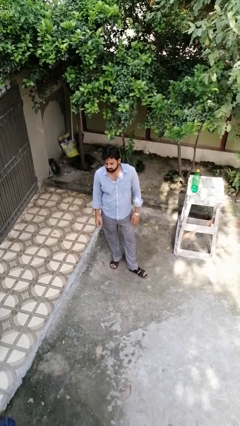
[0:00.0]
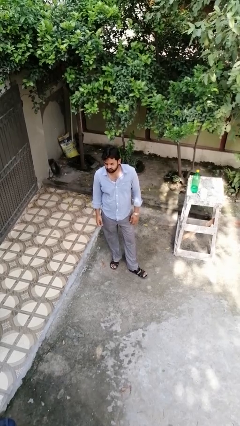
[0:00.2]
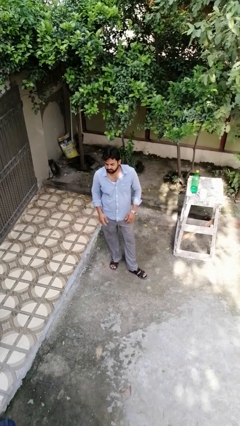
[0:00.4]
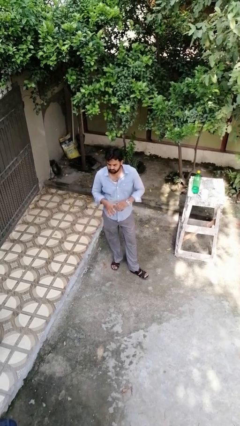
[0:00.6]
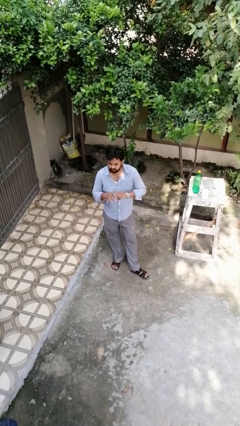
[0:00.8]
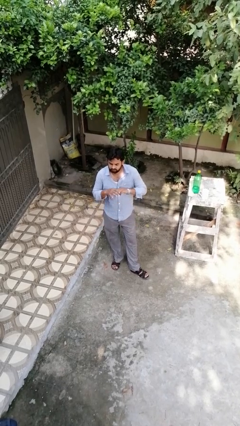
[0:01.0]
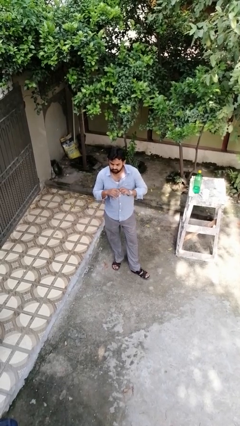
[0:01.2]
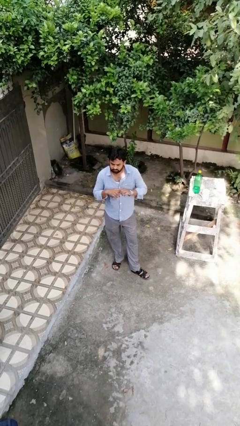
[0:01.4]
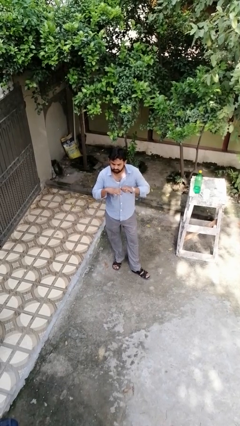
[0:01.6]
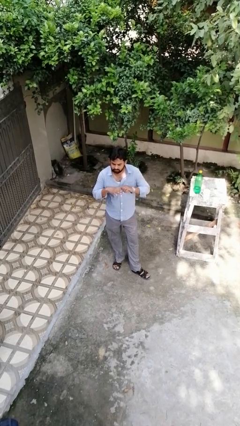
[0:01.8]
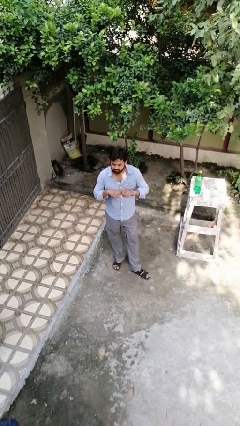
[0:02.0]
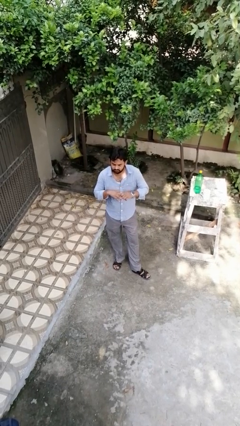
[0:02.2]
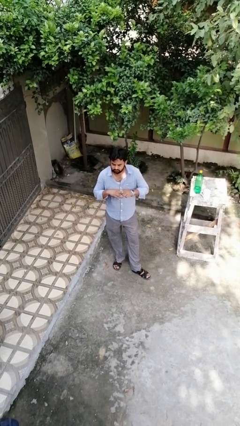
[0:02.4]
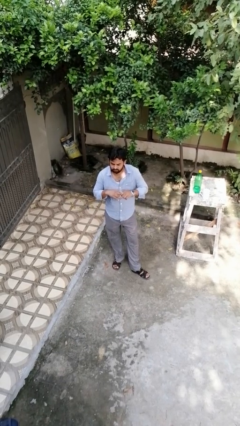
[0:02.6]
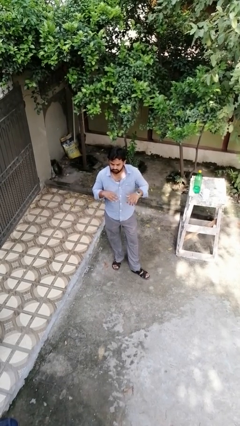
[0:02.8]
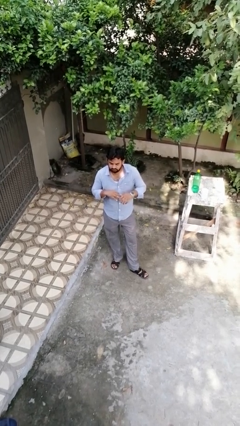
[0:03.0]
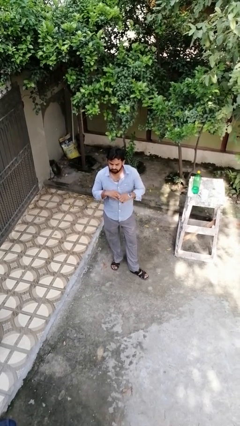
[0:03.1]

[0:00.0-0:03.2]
person snaps fingers

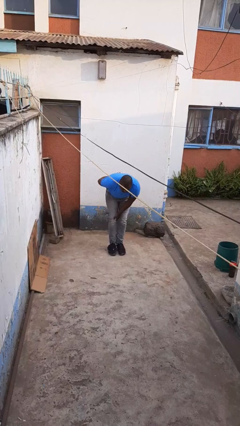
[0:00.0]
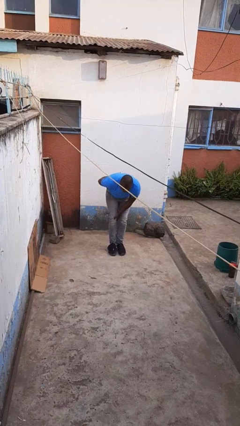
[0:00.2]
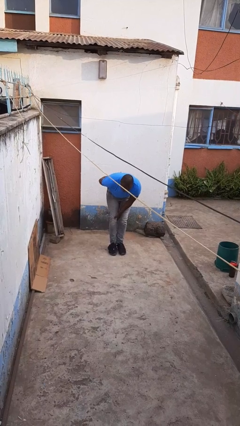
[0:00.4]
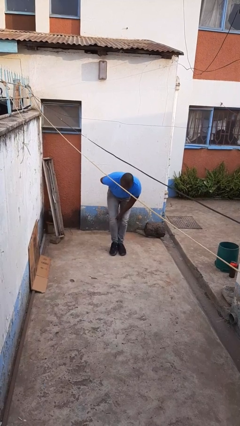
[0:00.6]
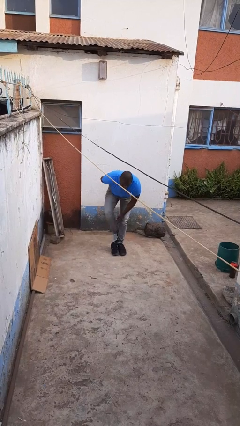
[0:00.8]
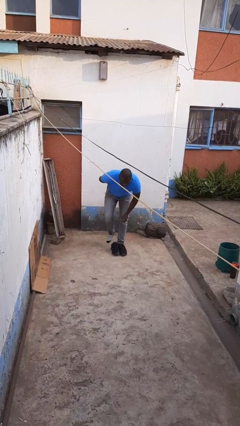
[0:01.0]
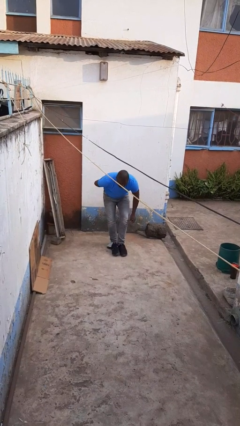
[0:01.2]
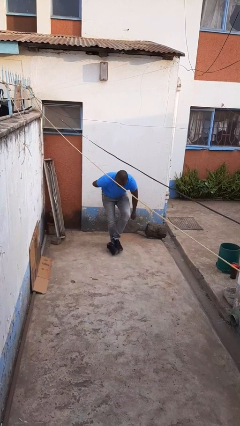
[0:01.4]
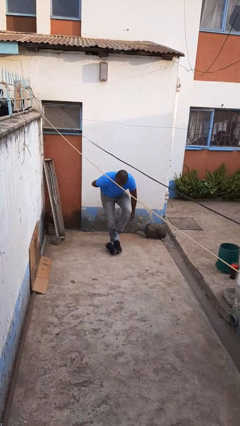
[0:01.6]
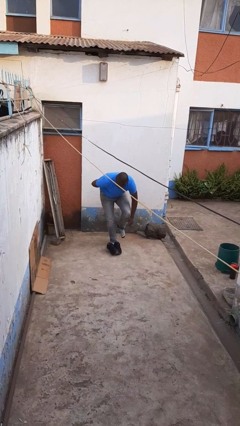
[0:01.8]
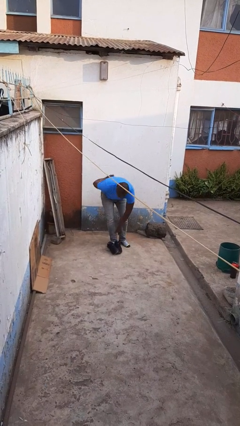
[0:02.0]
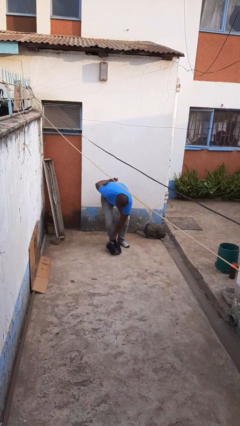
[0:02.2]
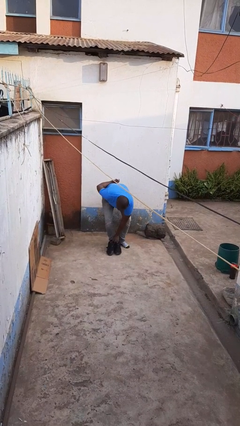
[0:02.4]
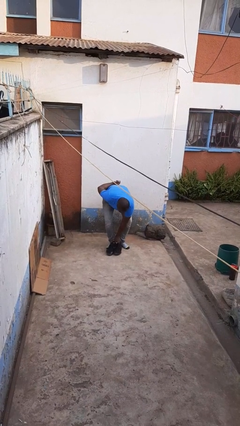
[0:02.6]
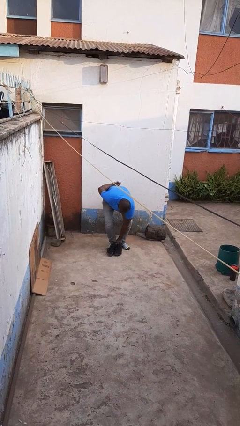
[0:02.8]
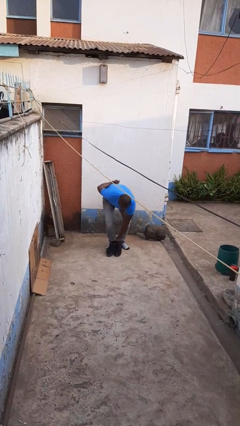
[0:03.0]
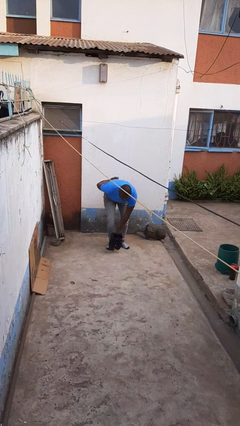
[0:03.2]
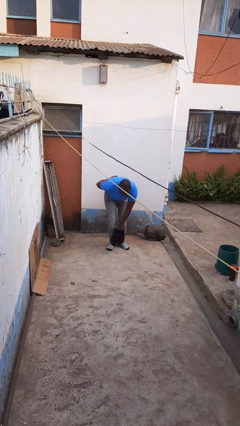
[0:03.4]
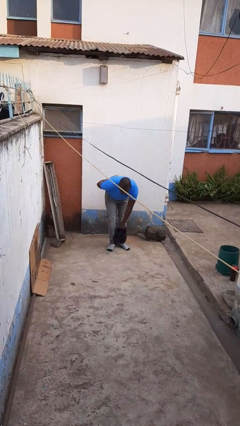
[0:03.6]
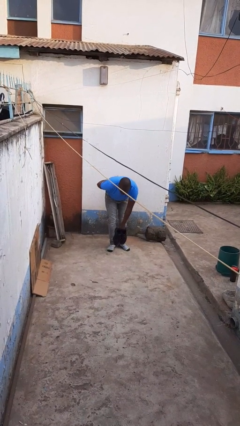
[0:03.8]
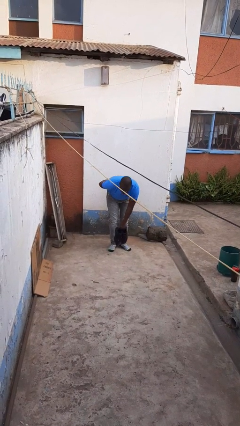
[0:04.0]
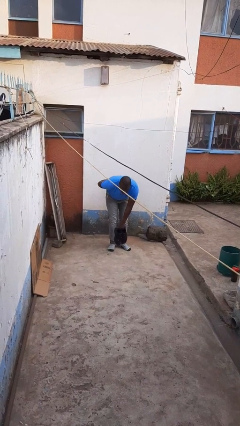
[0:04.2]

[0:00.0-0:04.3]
person takes off shoes

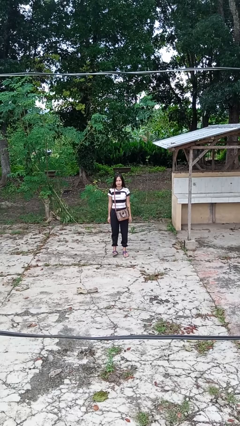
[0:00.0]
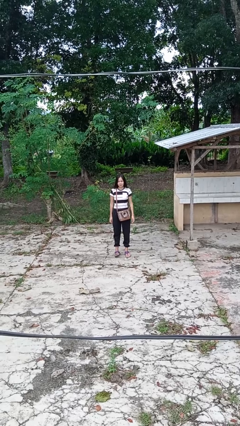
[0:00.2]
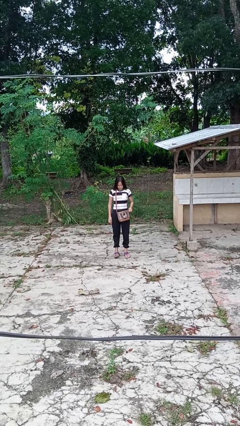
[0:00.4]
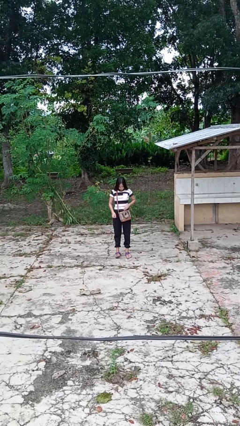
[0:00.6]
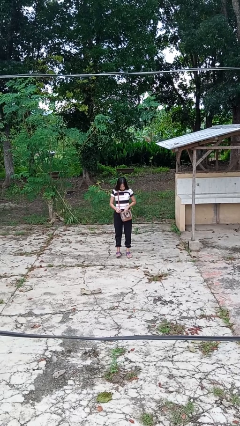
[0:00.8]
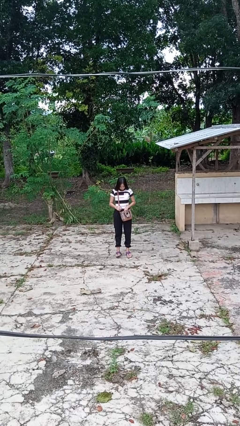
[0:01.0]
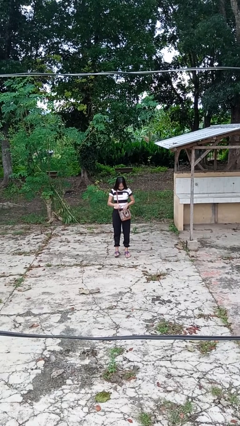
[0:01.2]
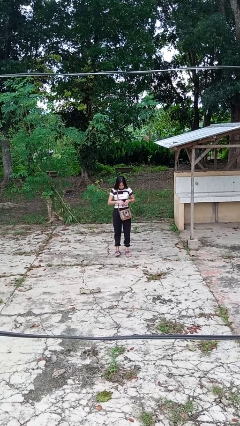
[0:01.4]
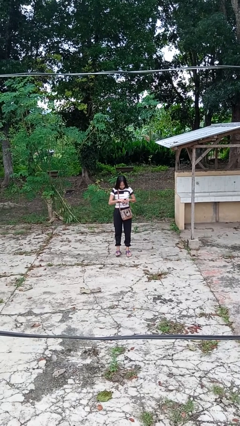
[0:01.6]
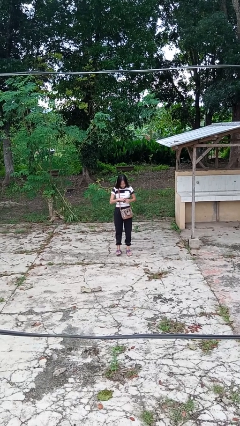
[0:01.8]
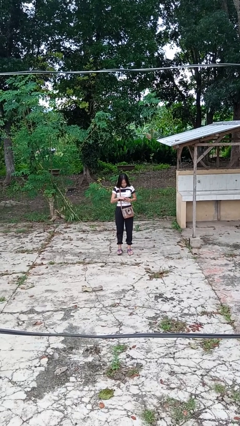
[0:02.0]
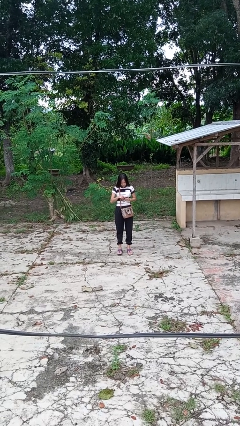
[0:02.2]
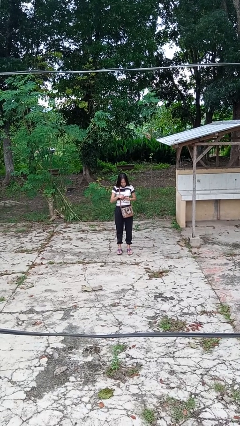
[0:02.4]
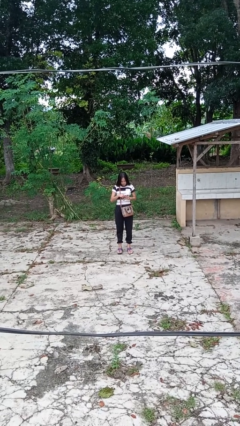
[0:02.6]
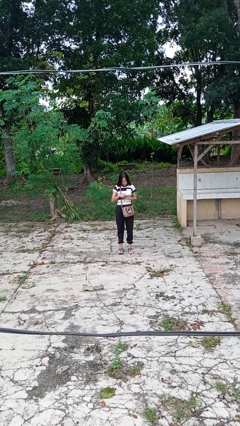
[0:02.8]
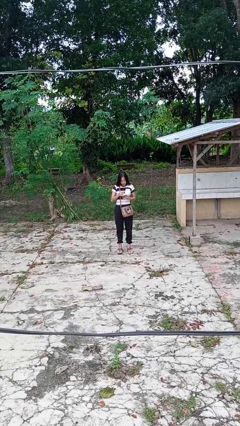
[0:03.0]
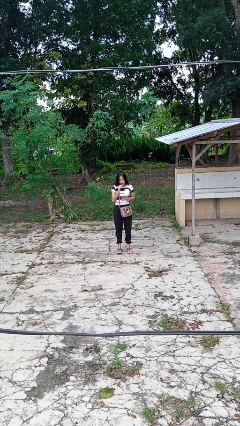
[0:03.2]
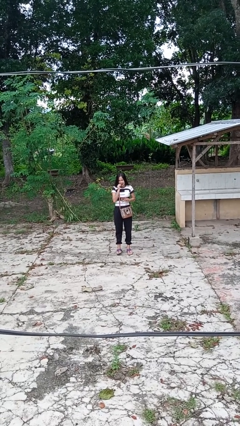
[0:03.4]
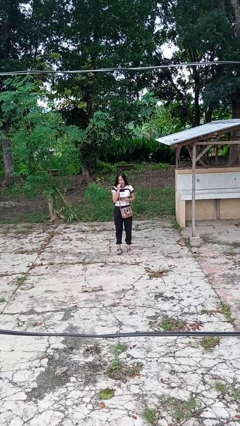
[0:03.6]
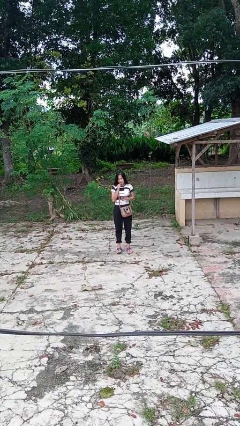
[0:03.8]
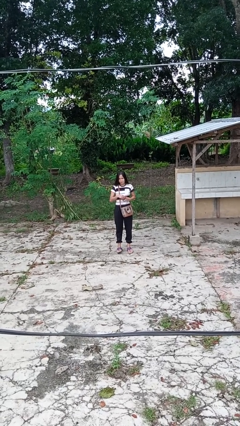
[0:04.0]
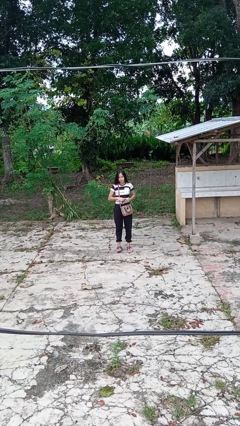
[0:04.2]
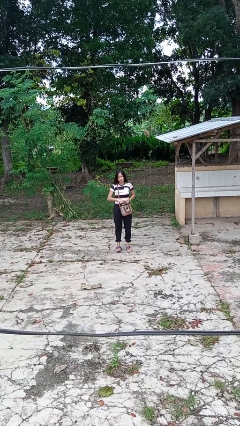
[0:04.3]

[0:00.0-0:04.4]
person eats snack from bag

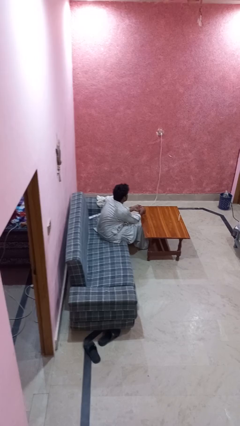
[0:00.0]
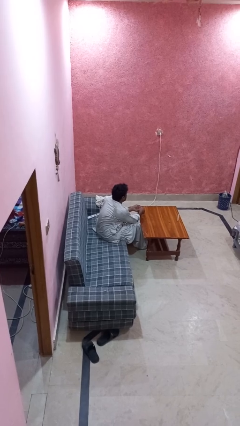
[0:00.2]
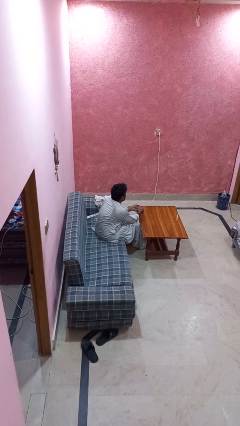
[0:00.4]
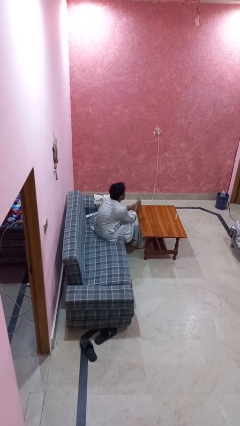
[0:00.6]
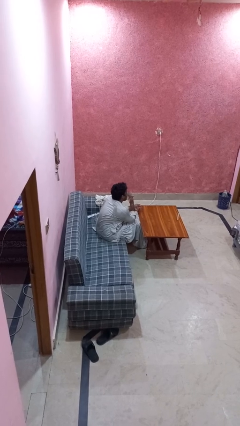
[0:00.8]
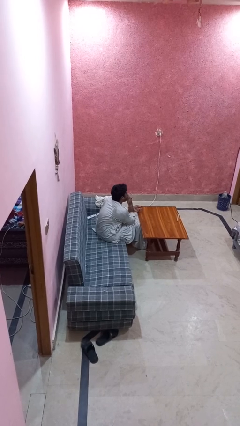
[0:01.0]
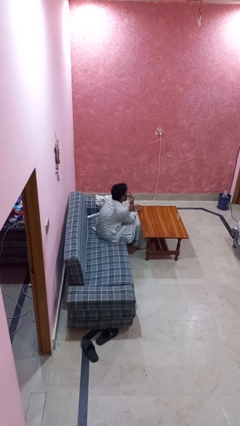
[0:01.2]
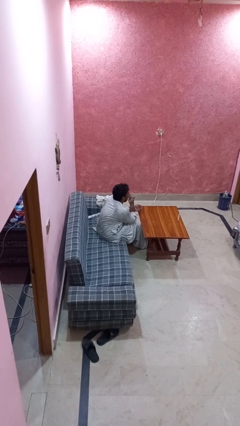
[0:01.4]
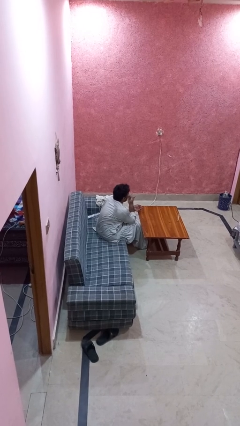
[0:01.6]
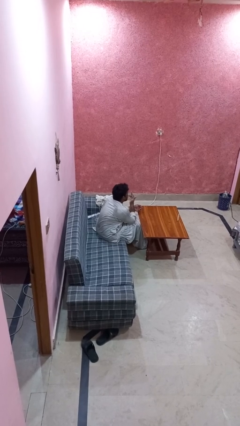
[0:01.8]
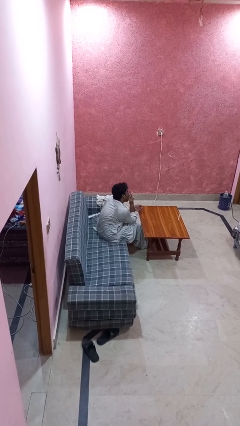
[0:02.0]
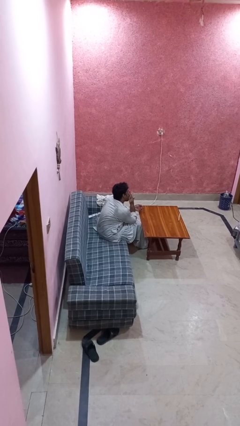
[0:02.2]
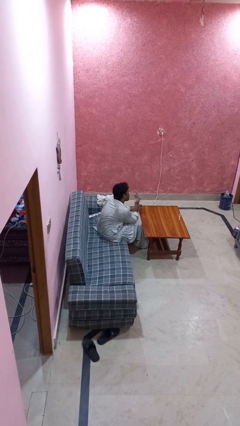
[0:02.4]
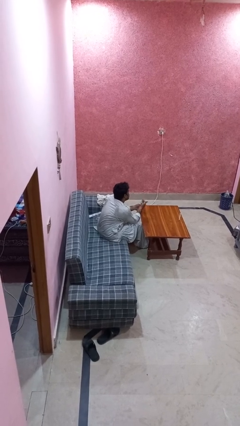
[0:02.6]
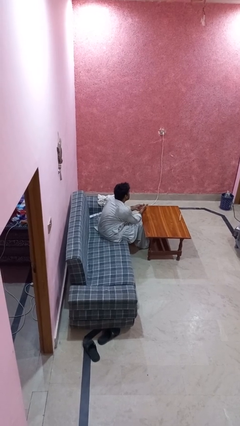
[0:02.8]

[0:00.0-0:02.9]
person licks fingers

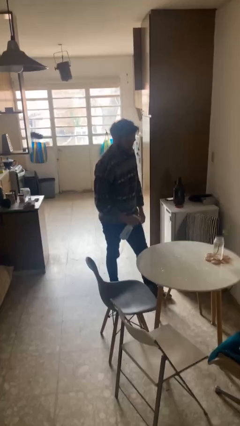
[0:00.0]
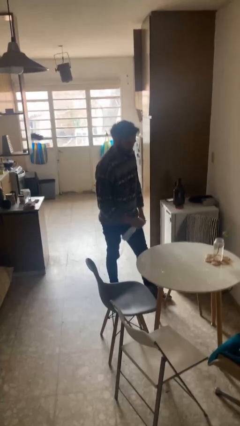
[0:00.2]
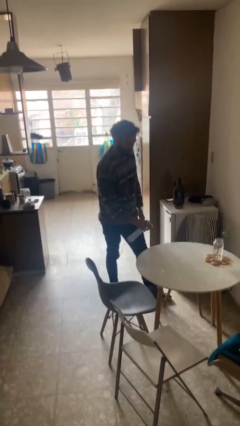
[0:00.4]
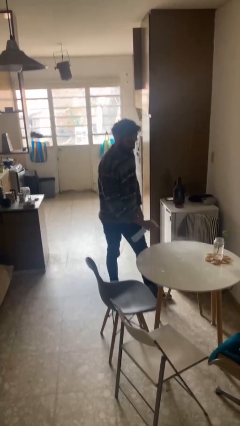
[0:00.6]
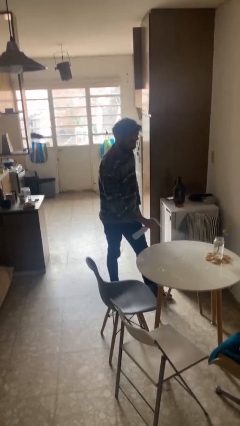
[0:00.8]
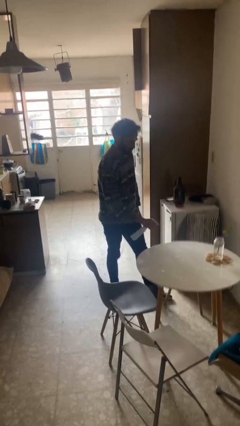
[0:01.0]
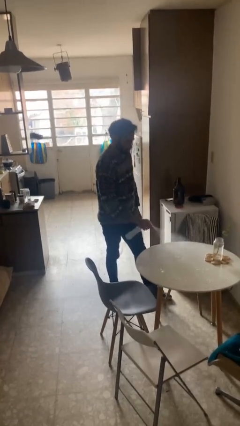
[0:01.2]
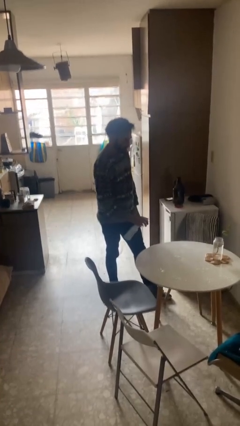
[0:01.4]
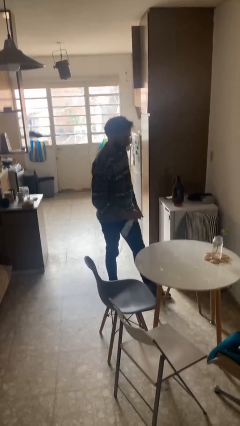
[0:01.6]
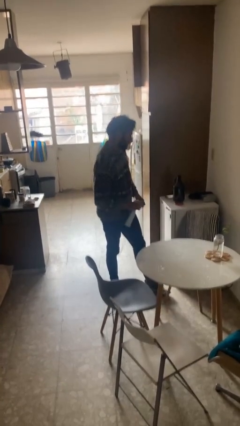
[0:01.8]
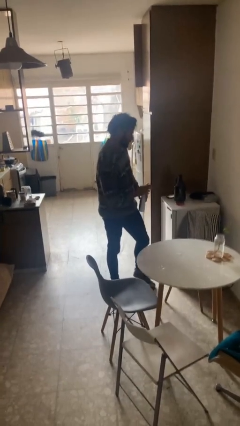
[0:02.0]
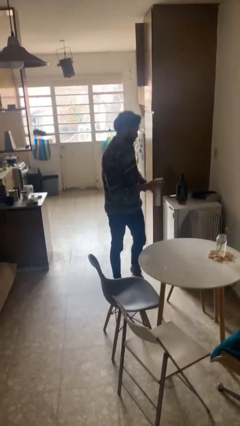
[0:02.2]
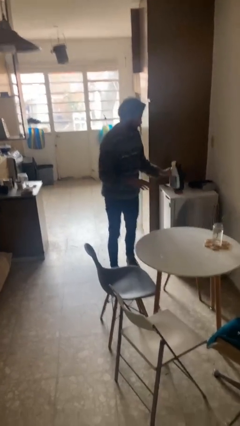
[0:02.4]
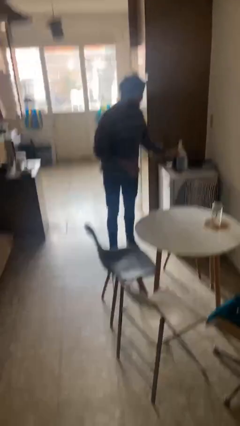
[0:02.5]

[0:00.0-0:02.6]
person sprays from bottle
